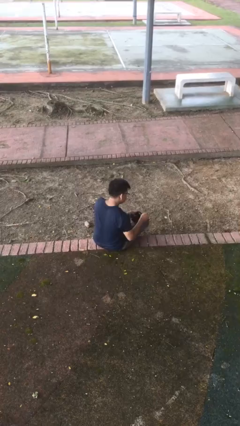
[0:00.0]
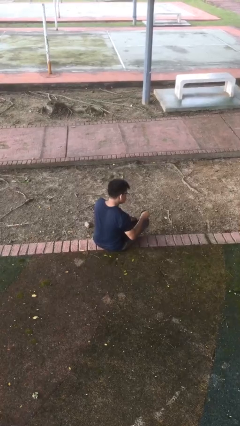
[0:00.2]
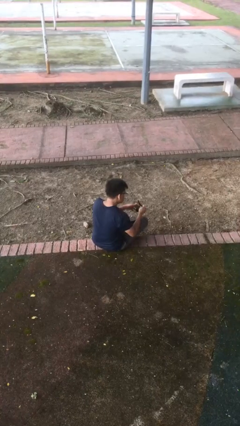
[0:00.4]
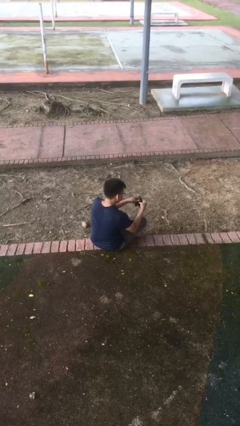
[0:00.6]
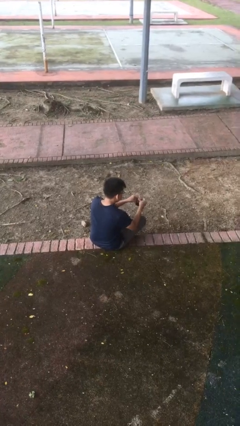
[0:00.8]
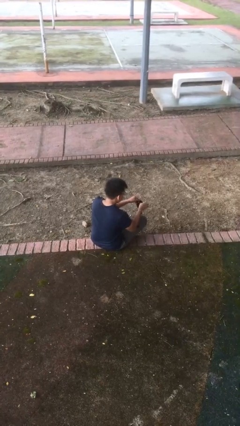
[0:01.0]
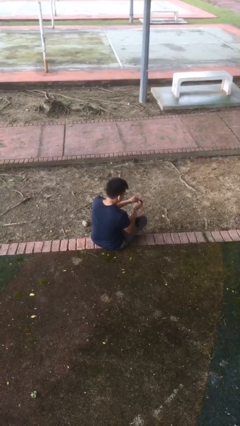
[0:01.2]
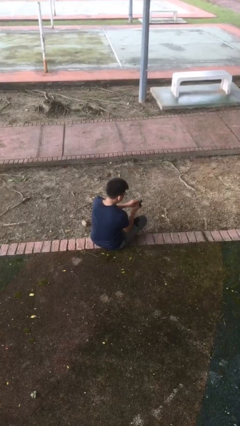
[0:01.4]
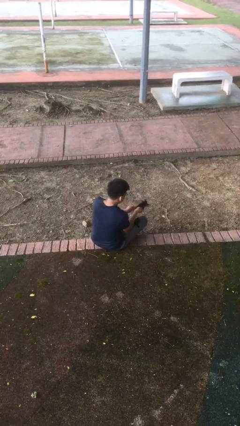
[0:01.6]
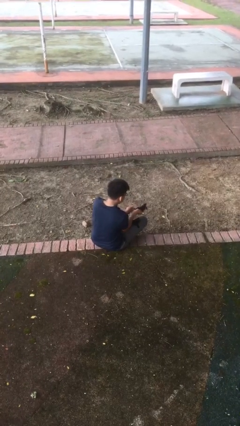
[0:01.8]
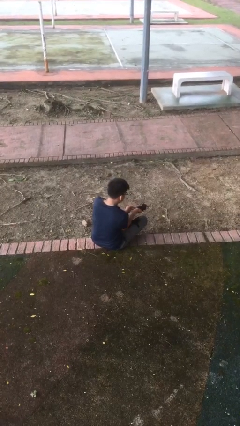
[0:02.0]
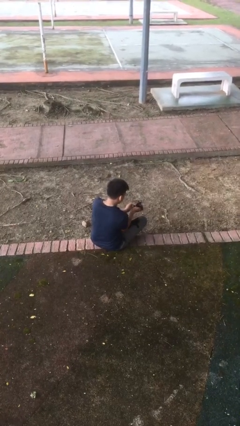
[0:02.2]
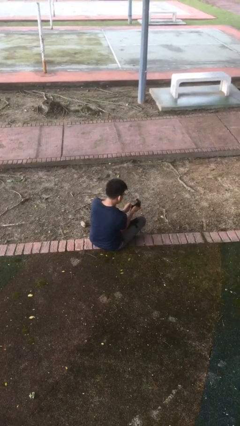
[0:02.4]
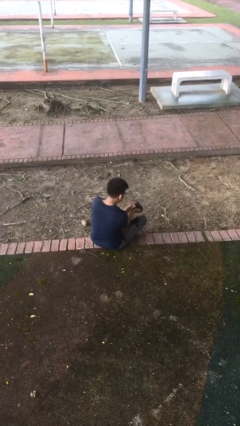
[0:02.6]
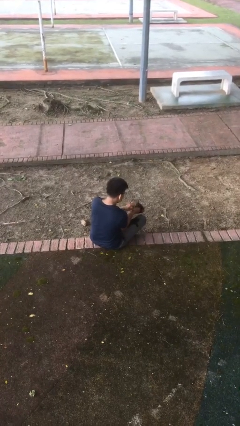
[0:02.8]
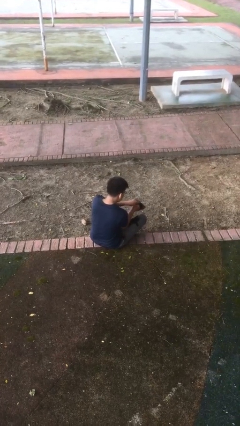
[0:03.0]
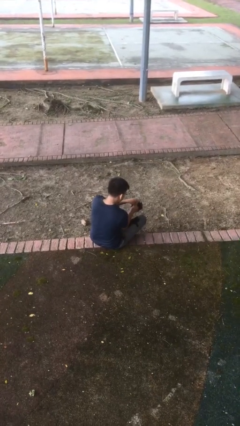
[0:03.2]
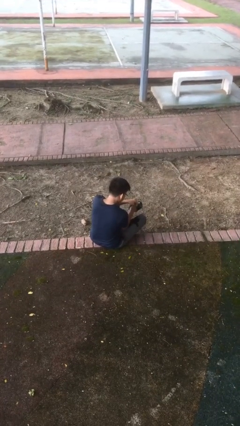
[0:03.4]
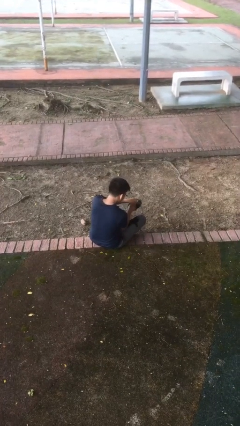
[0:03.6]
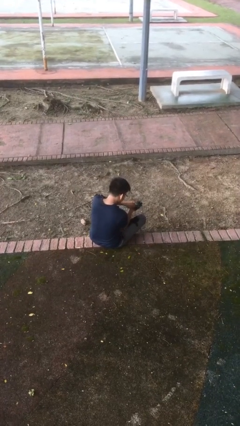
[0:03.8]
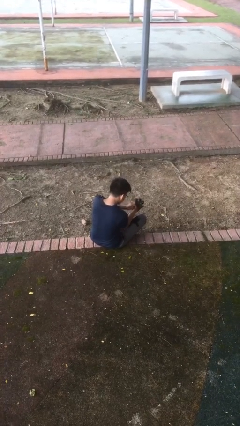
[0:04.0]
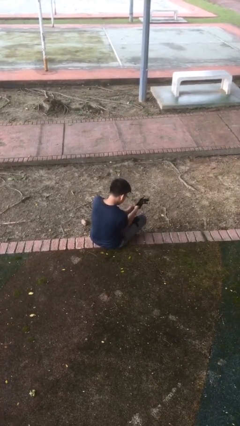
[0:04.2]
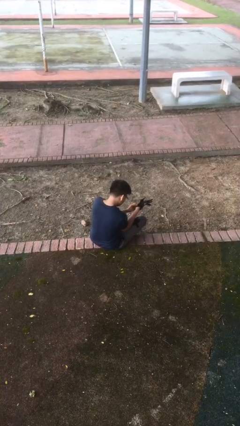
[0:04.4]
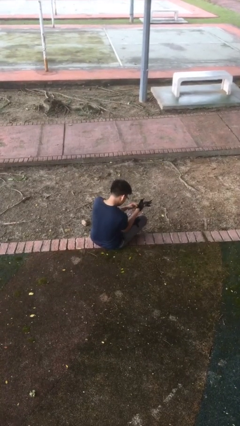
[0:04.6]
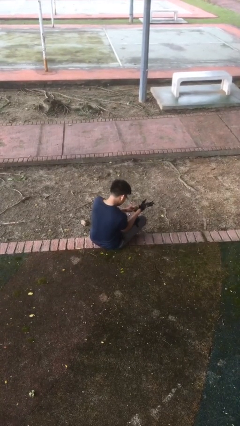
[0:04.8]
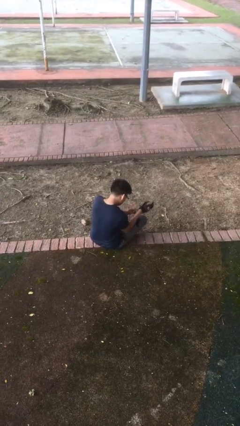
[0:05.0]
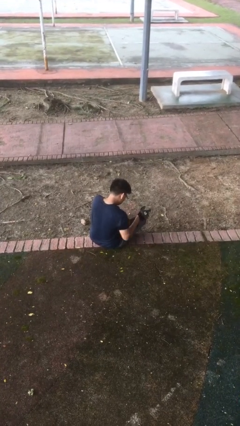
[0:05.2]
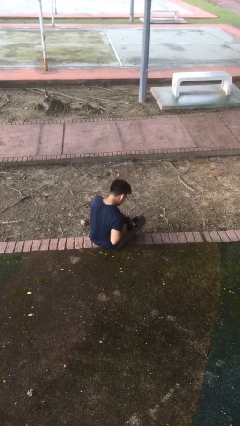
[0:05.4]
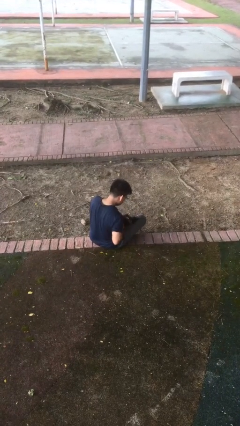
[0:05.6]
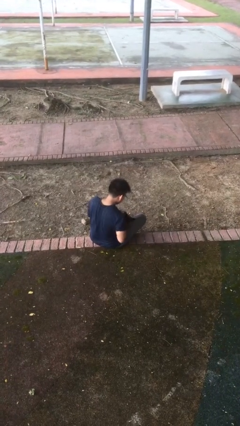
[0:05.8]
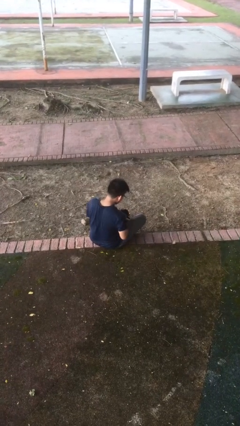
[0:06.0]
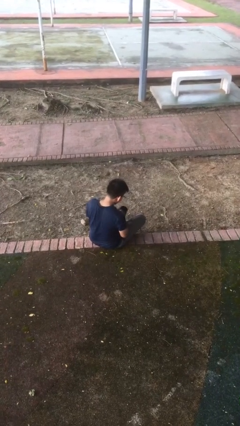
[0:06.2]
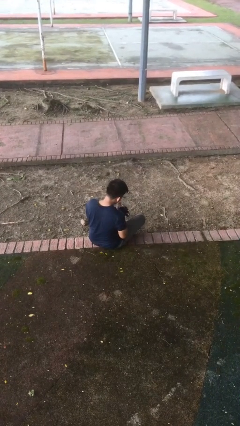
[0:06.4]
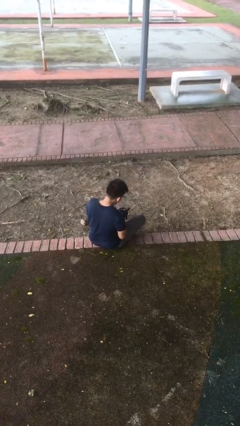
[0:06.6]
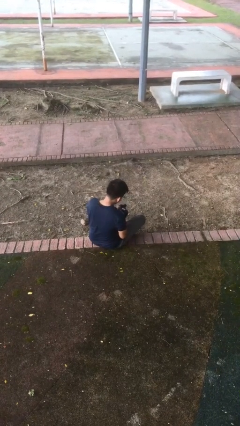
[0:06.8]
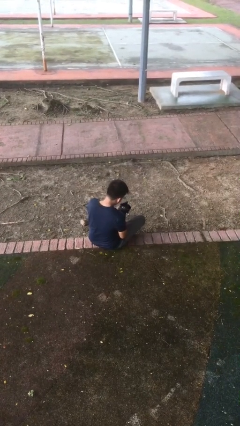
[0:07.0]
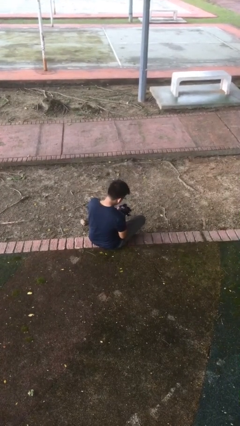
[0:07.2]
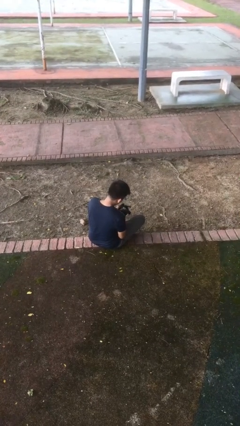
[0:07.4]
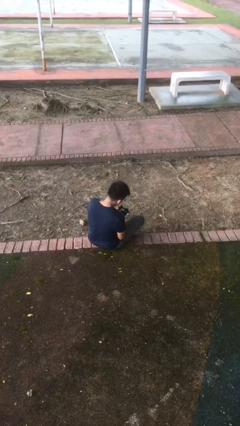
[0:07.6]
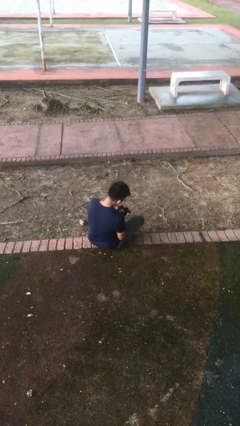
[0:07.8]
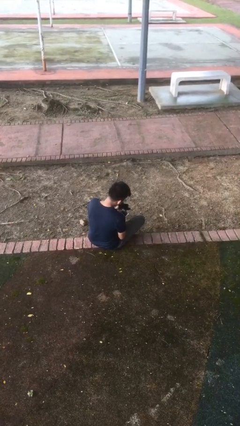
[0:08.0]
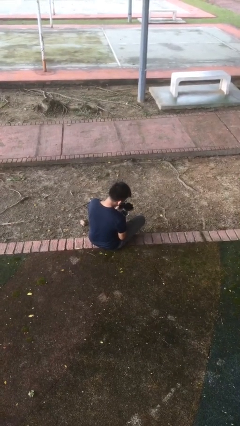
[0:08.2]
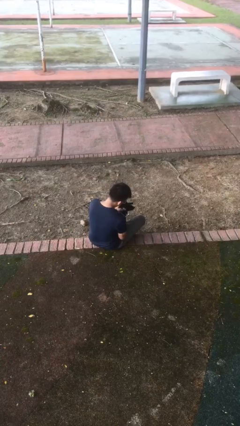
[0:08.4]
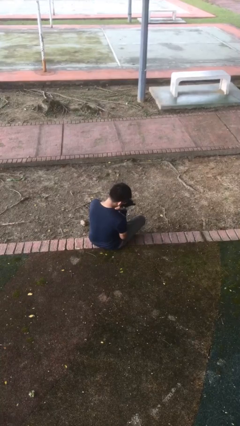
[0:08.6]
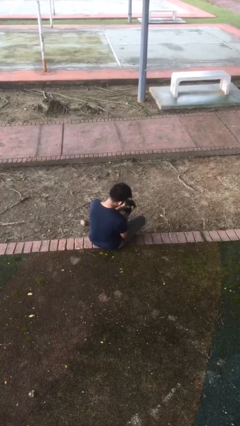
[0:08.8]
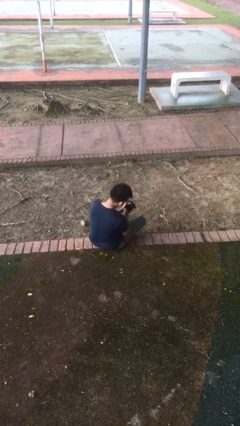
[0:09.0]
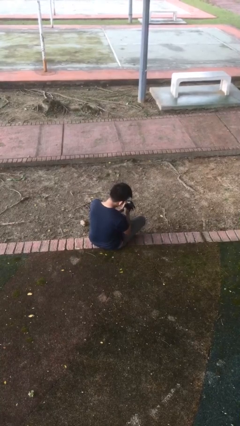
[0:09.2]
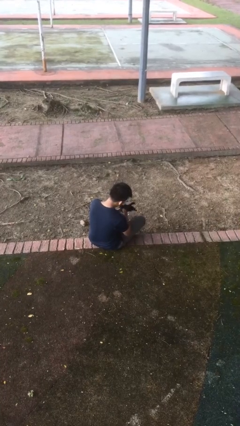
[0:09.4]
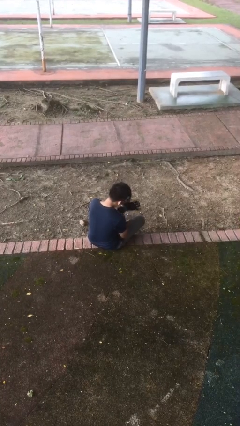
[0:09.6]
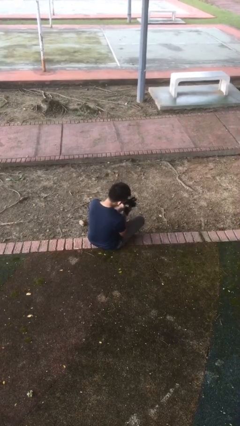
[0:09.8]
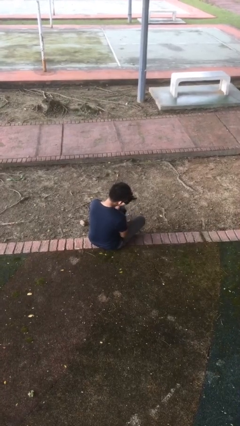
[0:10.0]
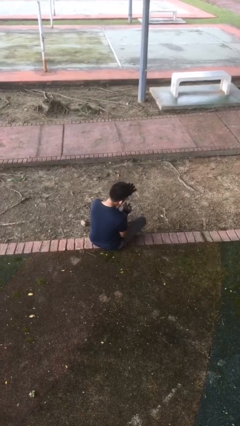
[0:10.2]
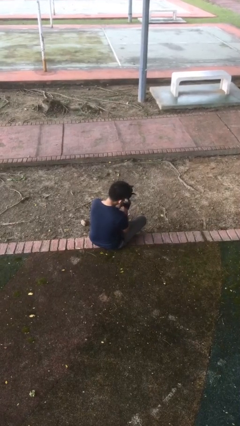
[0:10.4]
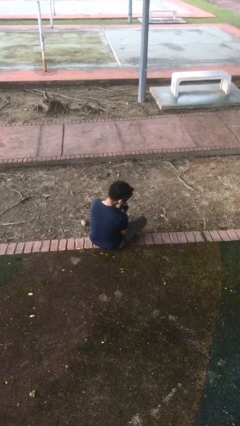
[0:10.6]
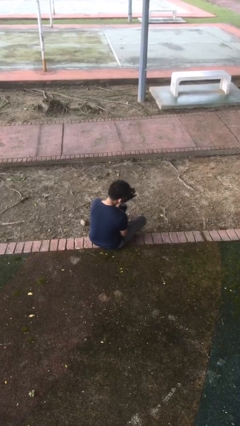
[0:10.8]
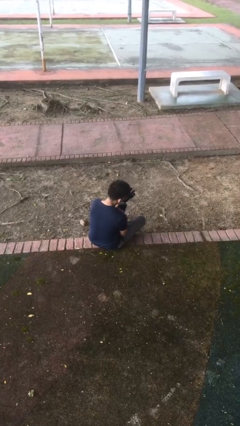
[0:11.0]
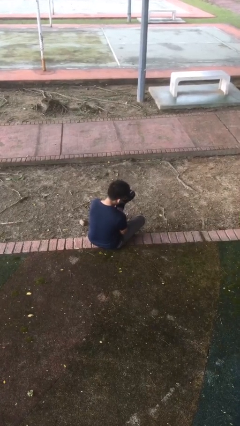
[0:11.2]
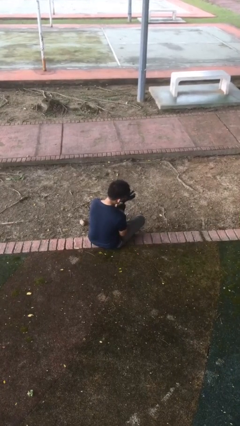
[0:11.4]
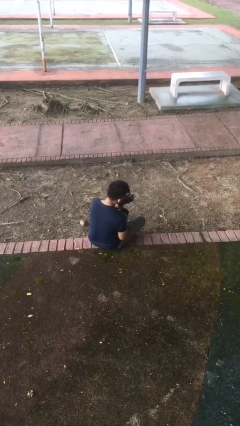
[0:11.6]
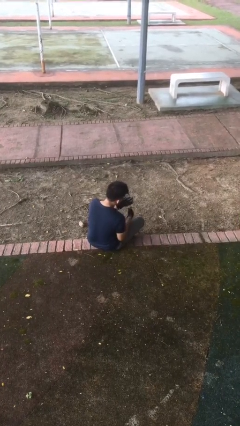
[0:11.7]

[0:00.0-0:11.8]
person puts on gloves

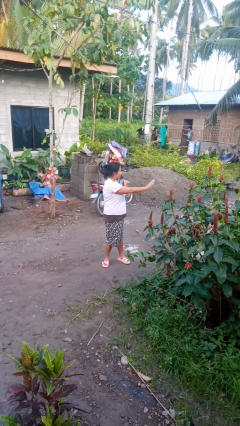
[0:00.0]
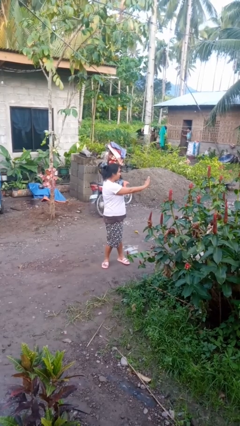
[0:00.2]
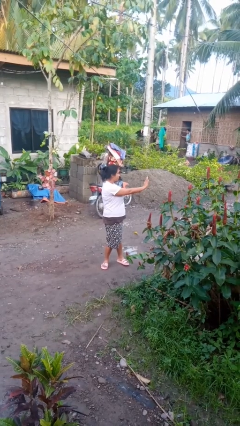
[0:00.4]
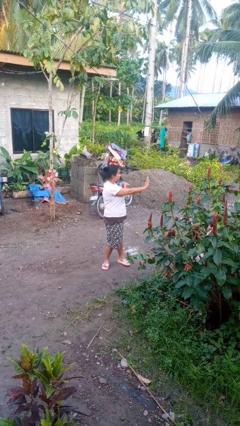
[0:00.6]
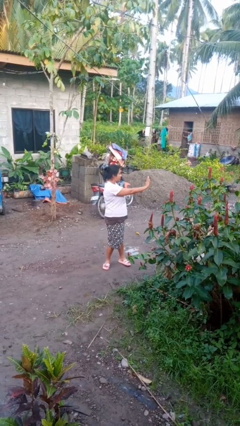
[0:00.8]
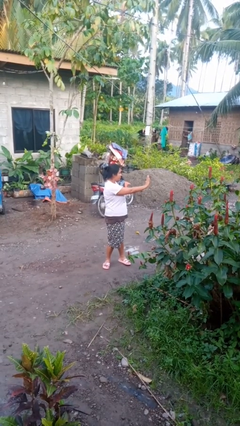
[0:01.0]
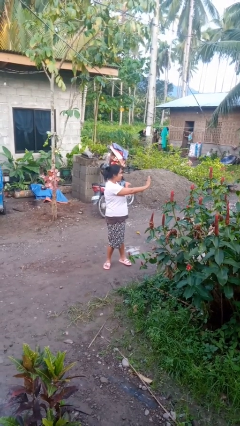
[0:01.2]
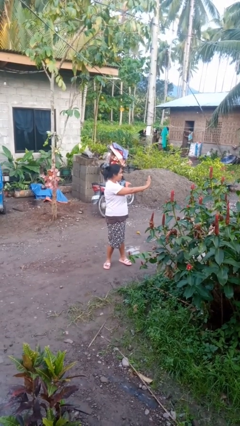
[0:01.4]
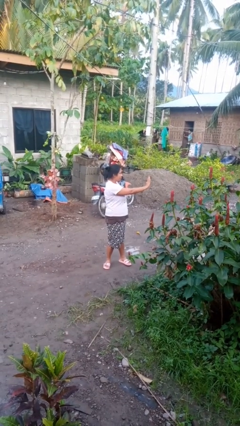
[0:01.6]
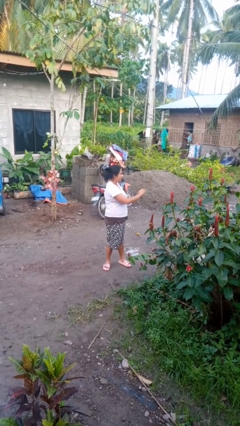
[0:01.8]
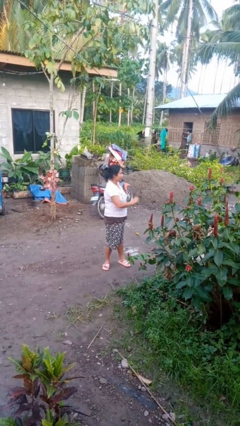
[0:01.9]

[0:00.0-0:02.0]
person gestures stop

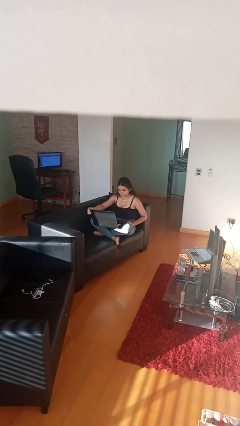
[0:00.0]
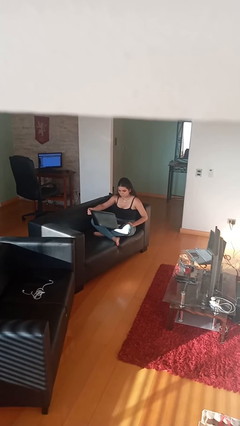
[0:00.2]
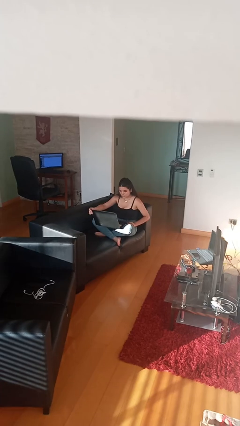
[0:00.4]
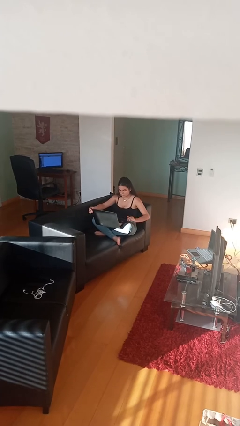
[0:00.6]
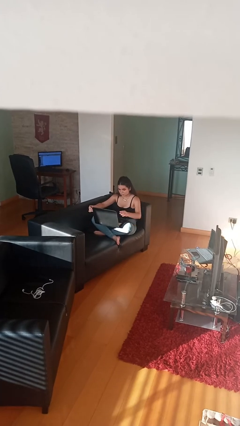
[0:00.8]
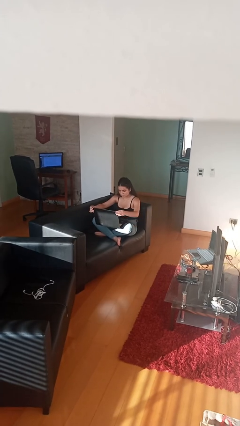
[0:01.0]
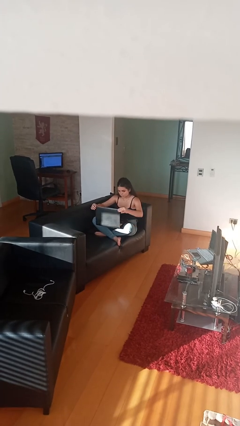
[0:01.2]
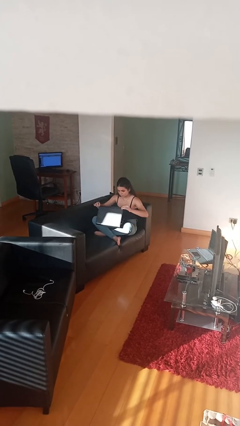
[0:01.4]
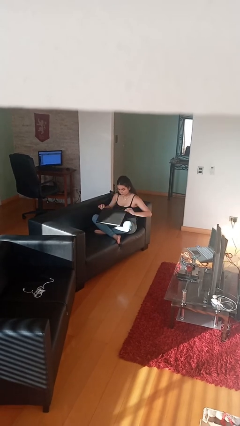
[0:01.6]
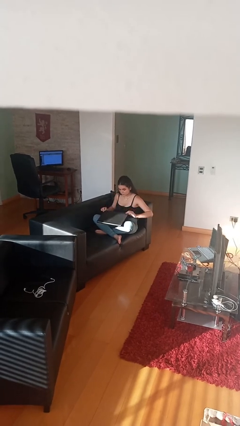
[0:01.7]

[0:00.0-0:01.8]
person interacts with laptop

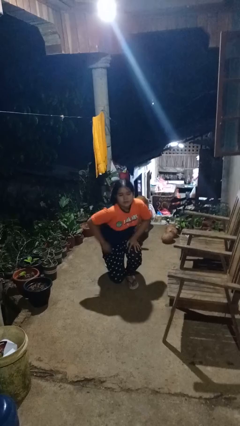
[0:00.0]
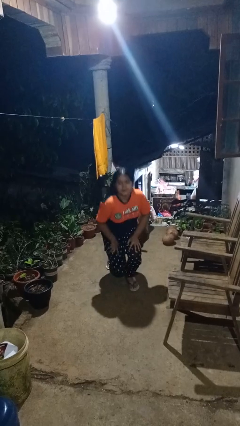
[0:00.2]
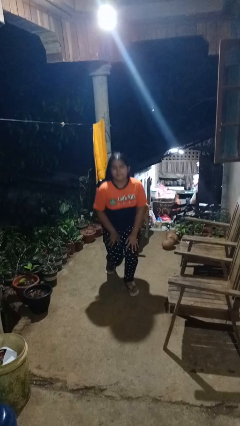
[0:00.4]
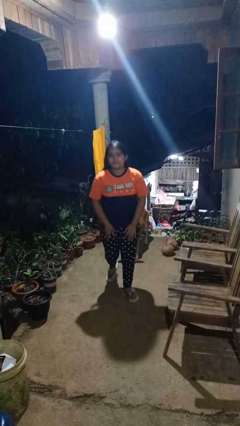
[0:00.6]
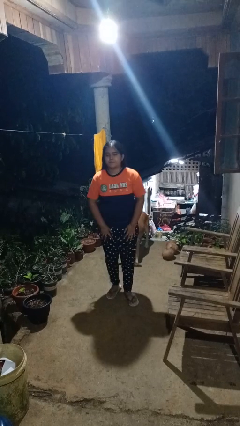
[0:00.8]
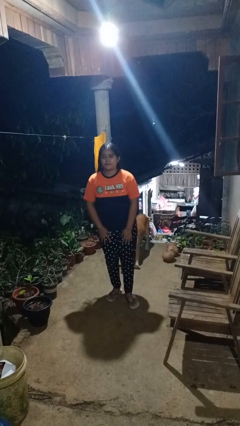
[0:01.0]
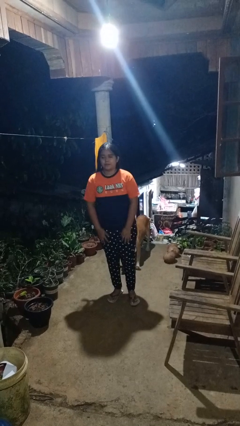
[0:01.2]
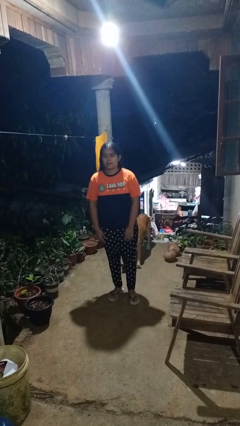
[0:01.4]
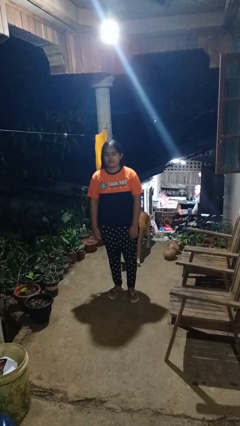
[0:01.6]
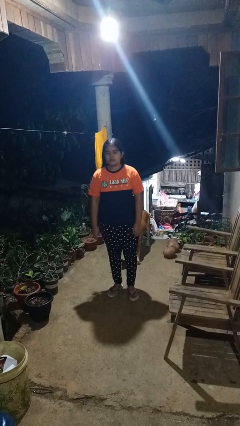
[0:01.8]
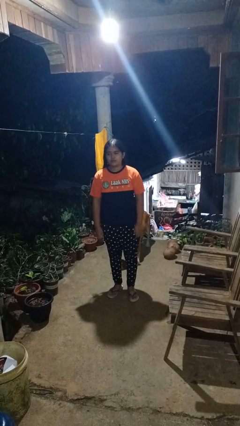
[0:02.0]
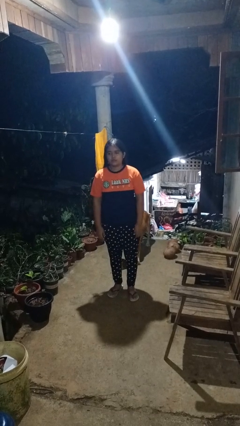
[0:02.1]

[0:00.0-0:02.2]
person stands up from floor
